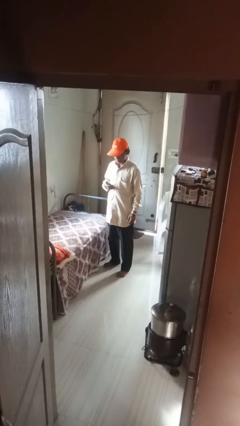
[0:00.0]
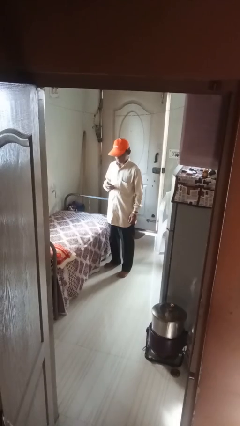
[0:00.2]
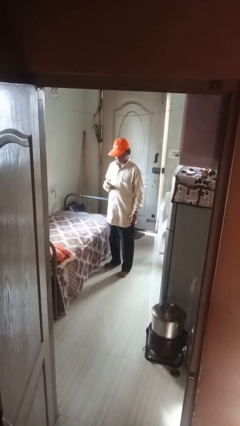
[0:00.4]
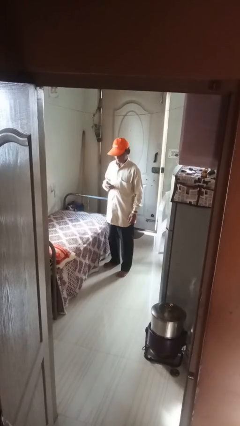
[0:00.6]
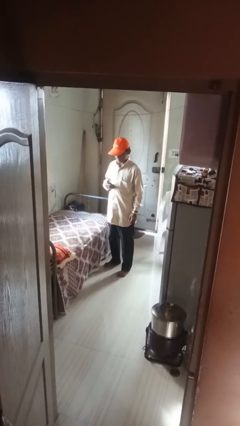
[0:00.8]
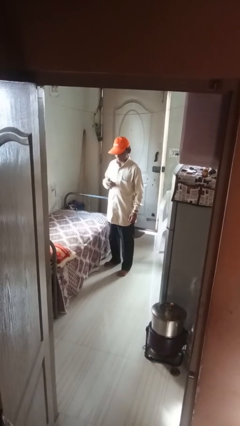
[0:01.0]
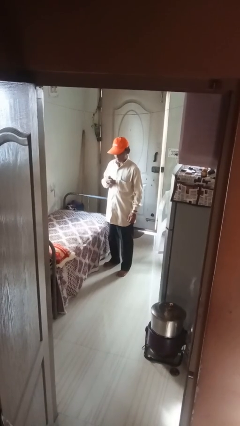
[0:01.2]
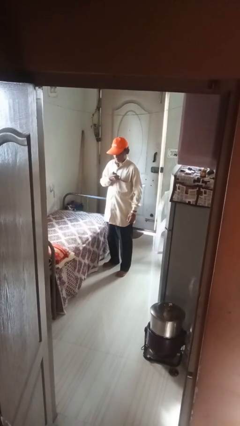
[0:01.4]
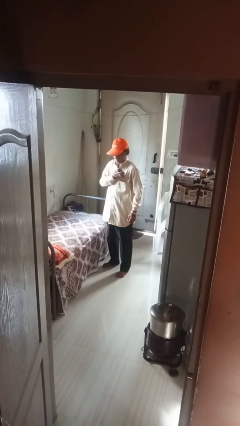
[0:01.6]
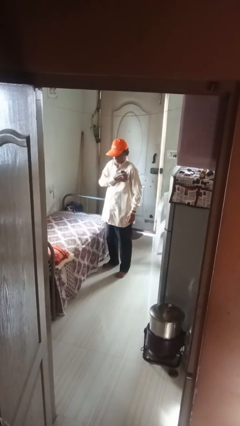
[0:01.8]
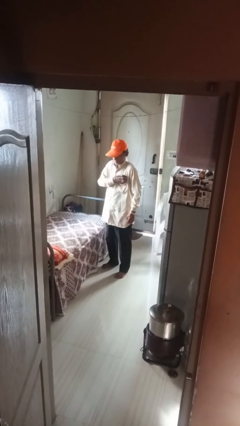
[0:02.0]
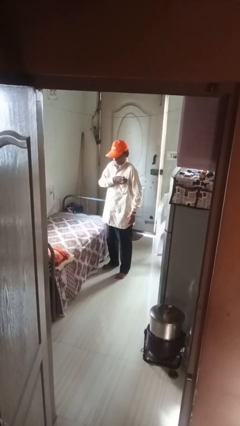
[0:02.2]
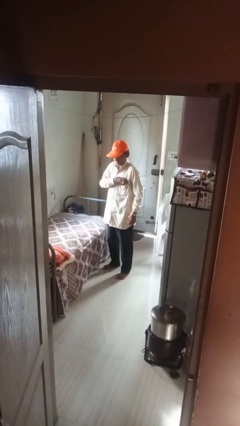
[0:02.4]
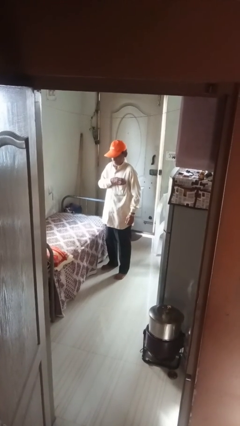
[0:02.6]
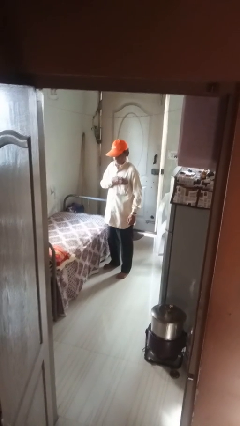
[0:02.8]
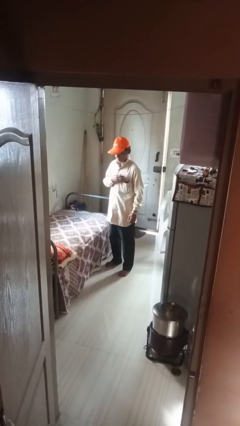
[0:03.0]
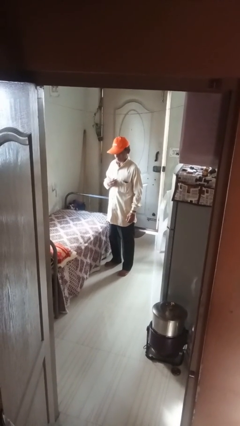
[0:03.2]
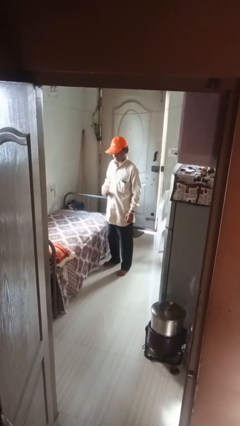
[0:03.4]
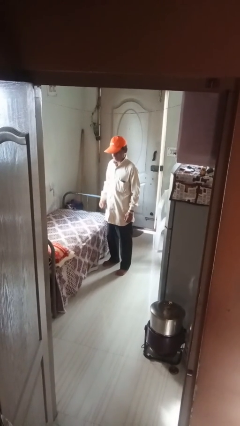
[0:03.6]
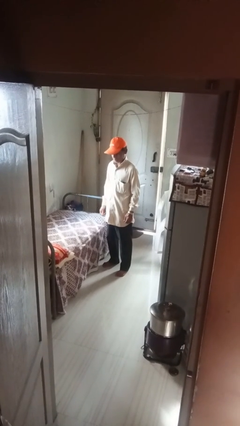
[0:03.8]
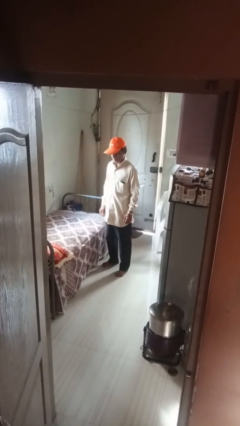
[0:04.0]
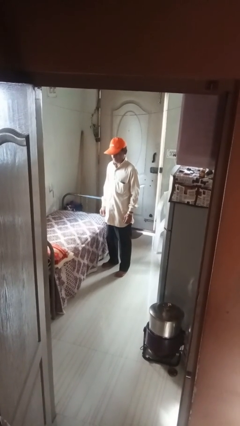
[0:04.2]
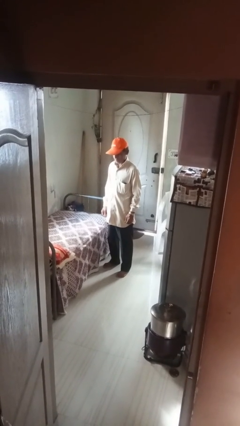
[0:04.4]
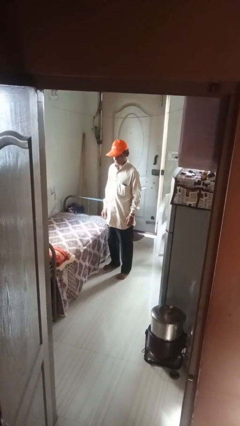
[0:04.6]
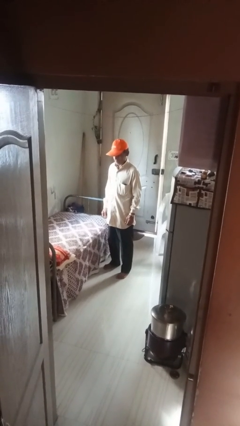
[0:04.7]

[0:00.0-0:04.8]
person puts phone into pocket

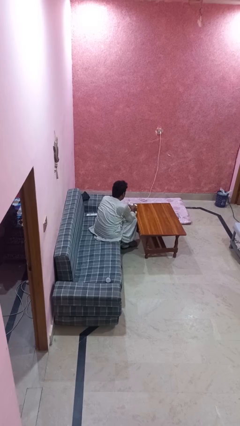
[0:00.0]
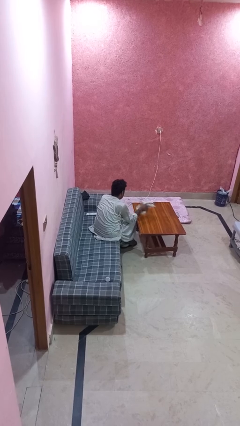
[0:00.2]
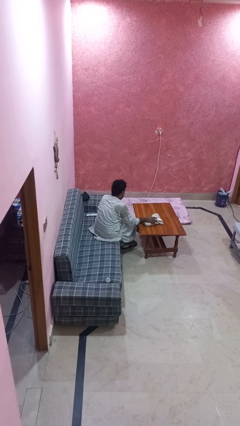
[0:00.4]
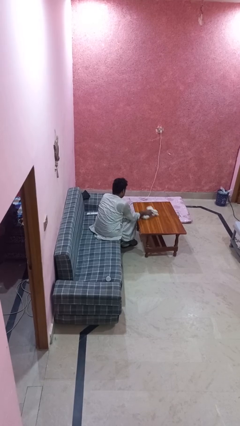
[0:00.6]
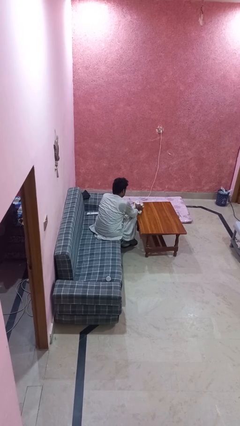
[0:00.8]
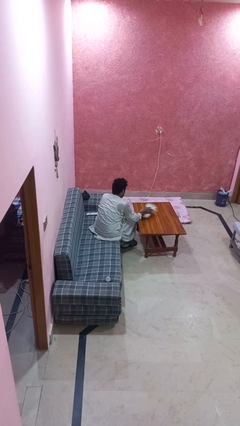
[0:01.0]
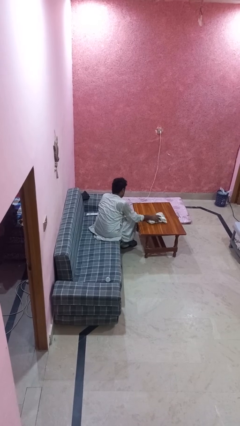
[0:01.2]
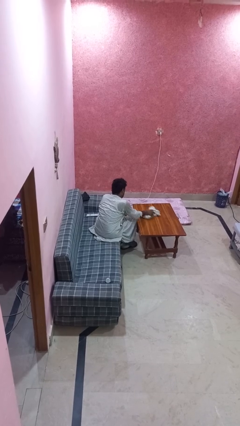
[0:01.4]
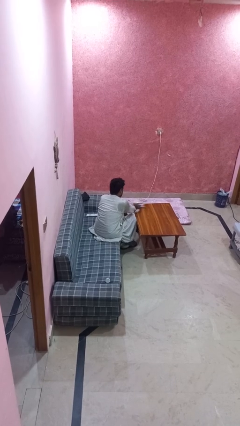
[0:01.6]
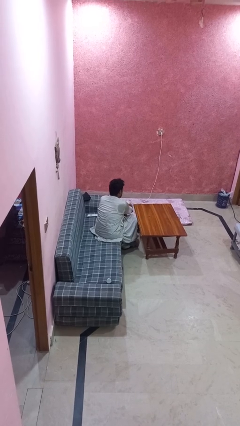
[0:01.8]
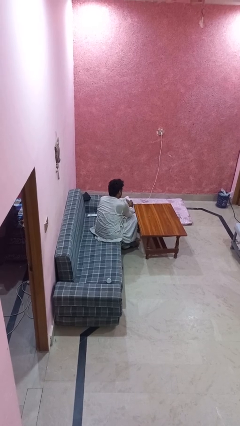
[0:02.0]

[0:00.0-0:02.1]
person cleans table with rag

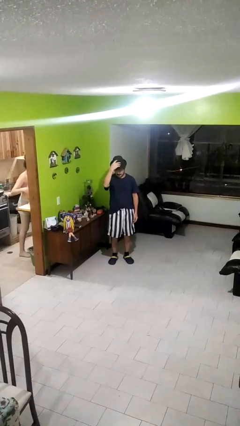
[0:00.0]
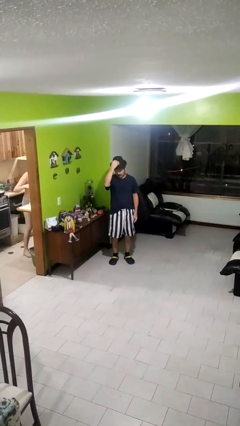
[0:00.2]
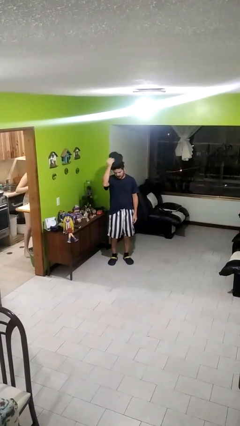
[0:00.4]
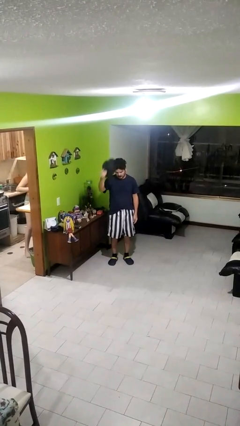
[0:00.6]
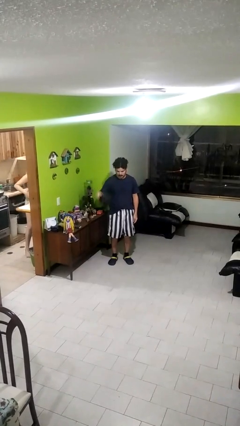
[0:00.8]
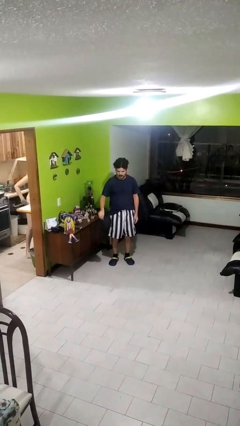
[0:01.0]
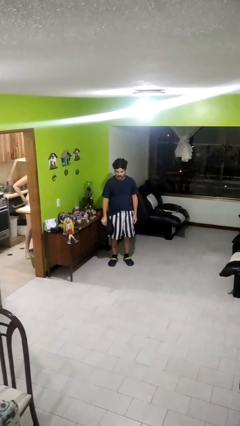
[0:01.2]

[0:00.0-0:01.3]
person takes off hat

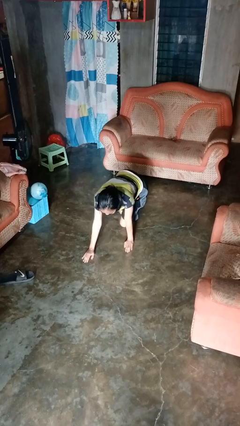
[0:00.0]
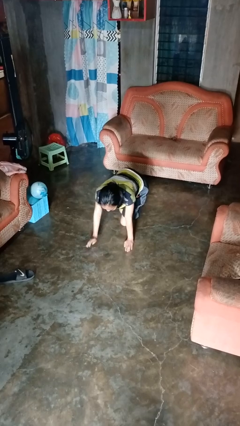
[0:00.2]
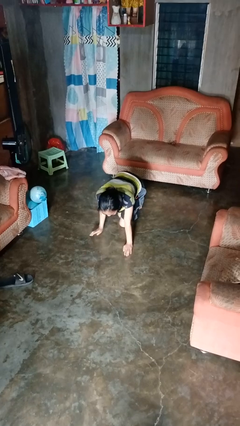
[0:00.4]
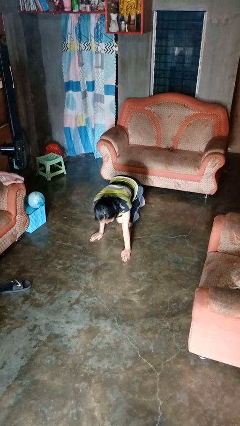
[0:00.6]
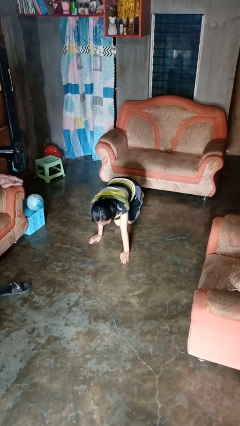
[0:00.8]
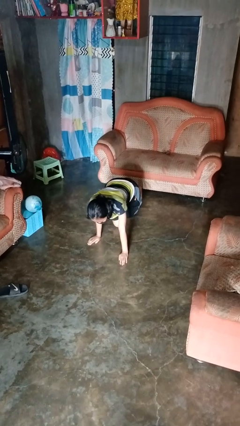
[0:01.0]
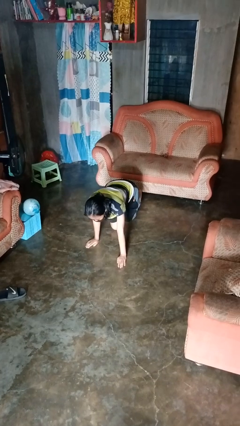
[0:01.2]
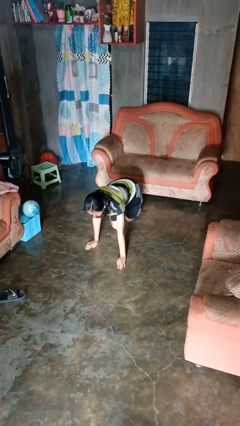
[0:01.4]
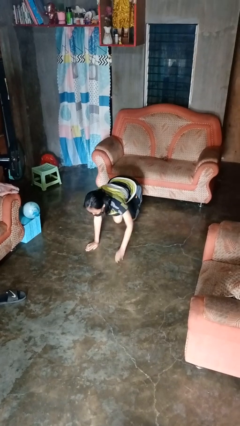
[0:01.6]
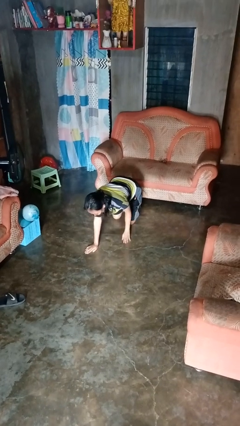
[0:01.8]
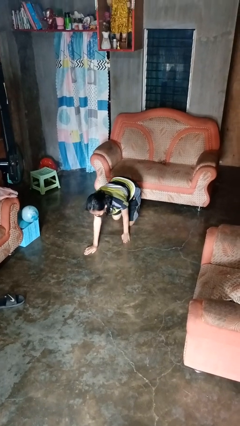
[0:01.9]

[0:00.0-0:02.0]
person crawls

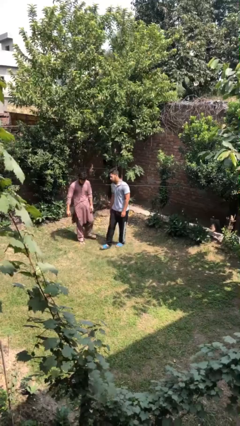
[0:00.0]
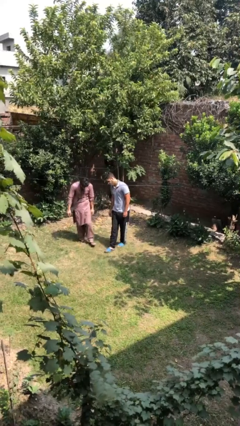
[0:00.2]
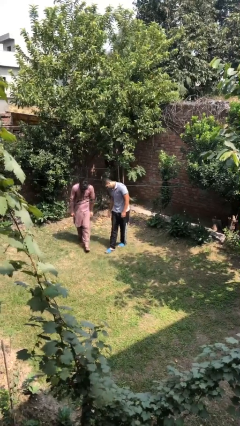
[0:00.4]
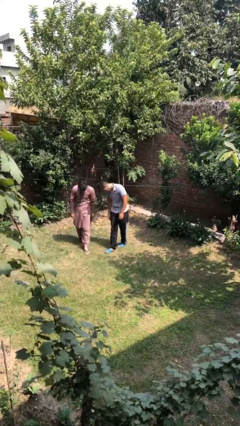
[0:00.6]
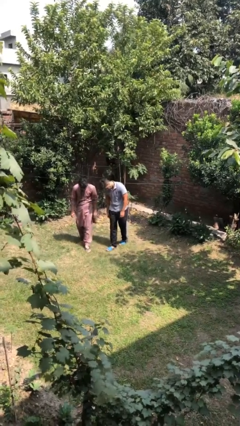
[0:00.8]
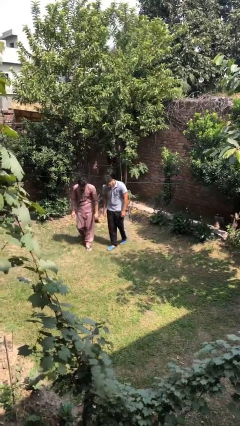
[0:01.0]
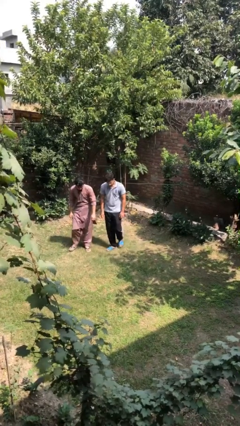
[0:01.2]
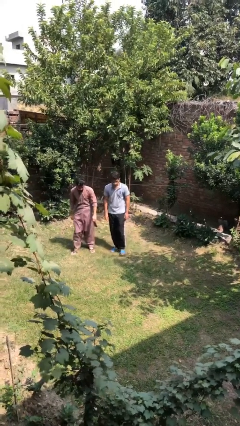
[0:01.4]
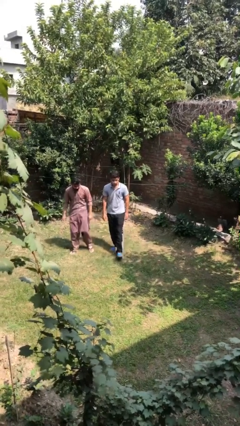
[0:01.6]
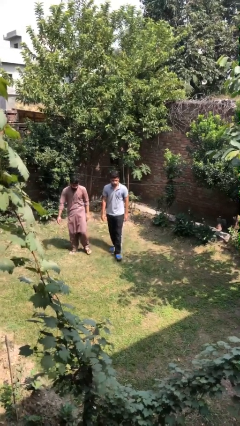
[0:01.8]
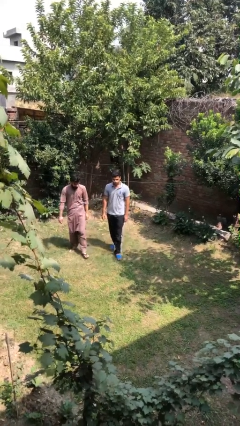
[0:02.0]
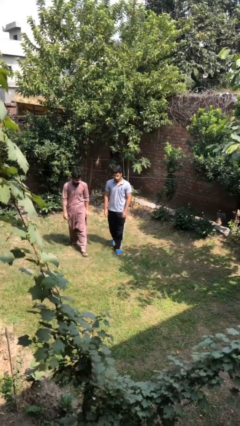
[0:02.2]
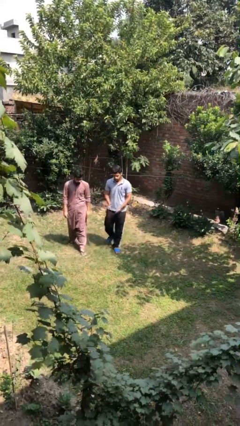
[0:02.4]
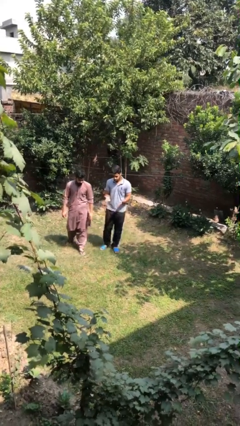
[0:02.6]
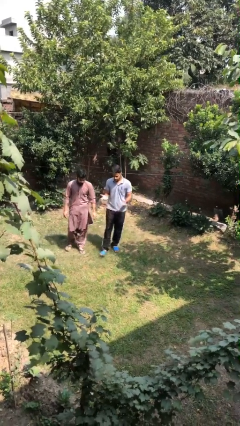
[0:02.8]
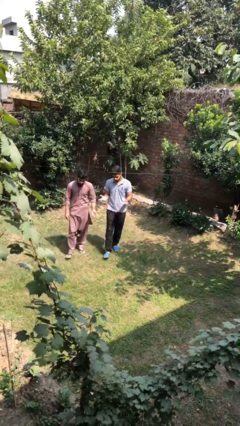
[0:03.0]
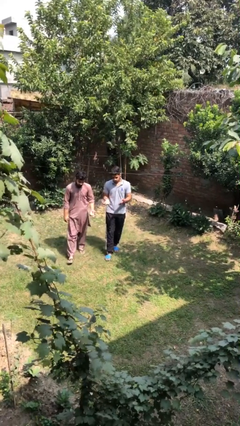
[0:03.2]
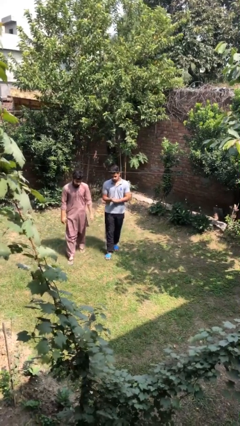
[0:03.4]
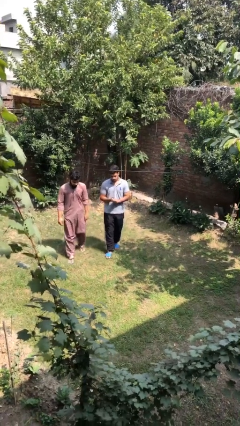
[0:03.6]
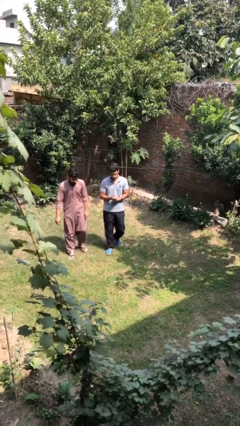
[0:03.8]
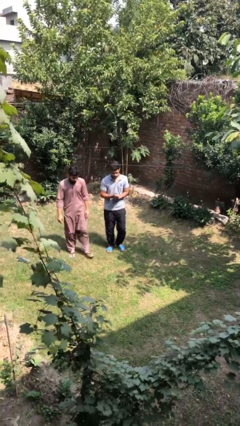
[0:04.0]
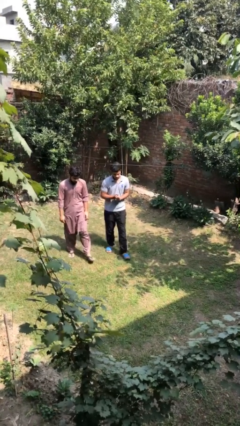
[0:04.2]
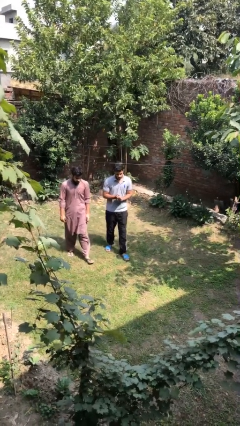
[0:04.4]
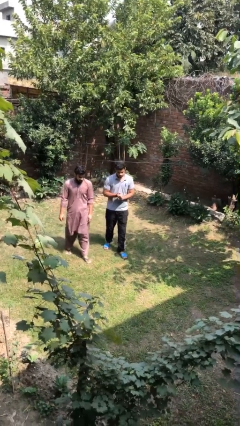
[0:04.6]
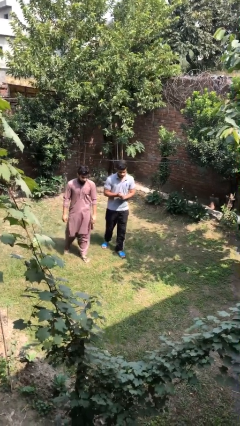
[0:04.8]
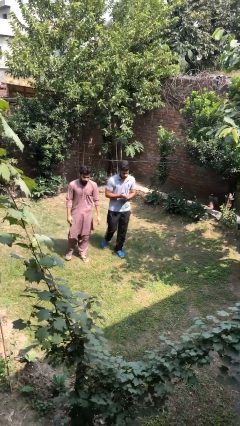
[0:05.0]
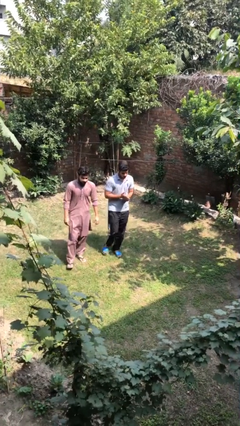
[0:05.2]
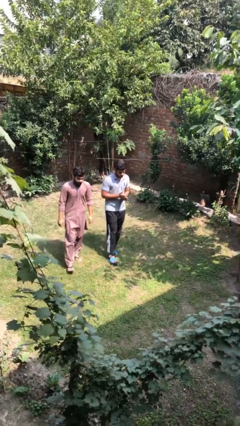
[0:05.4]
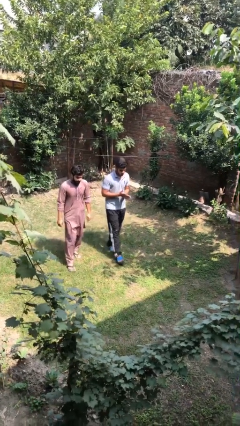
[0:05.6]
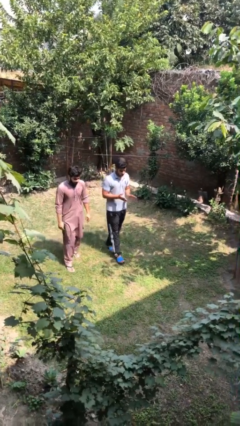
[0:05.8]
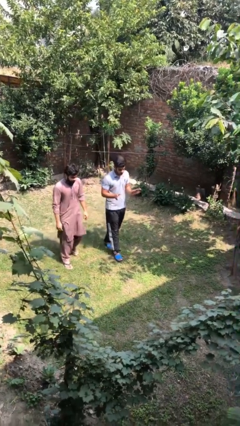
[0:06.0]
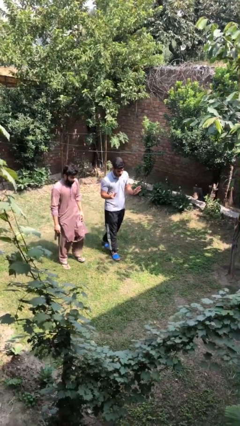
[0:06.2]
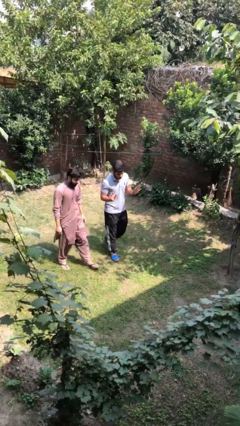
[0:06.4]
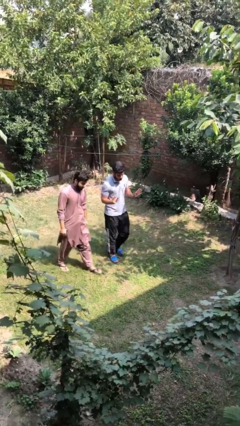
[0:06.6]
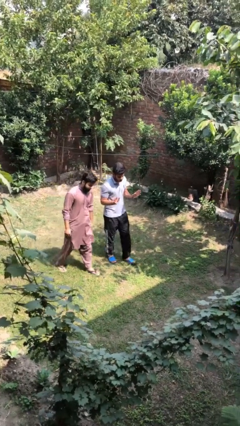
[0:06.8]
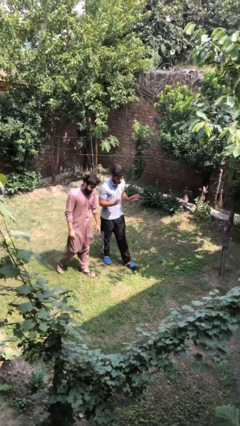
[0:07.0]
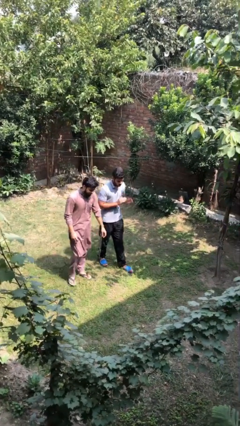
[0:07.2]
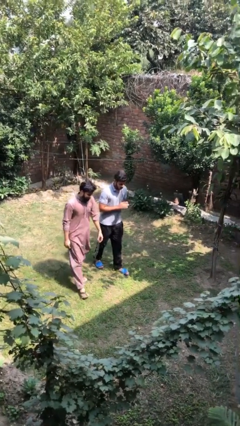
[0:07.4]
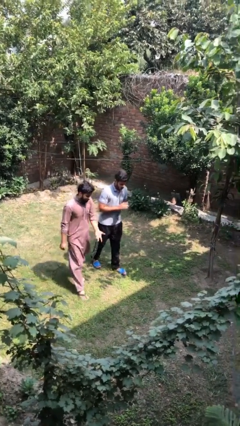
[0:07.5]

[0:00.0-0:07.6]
person talks to person
